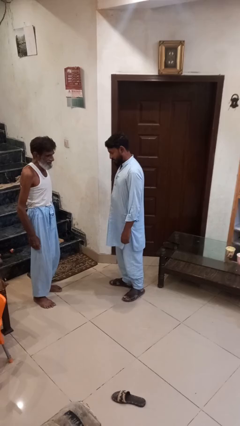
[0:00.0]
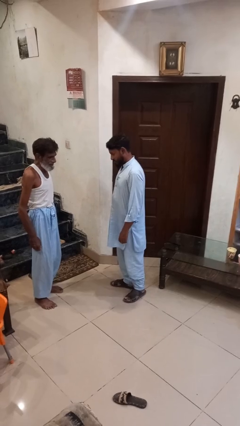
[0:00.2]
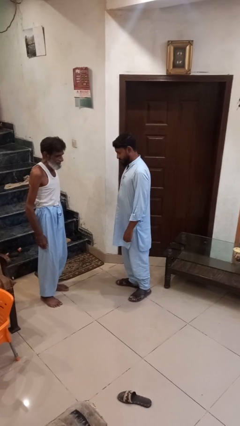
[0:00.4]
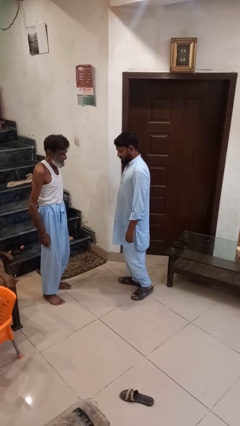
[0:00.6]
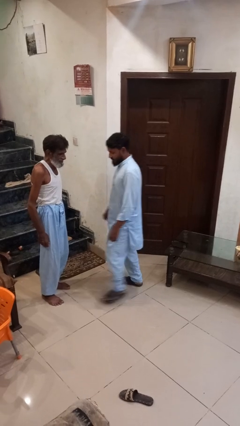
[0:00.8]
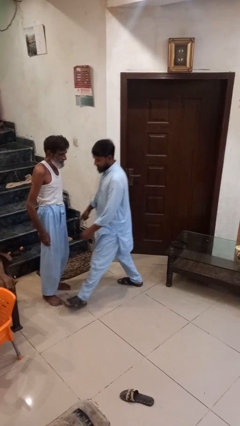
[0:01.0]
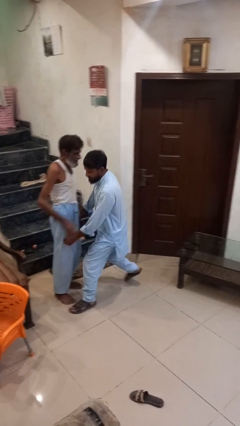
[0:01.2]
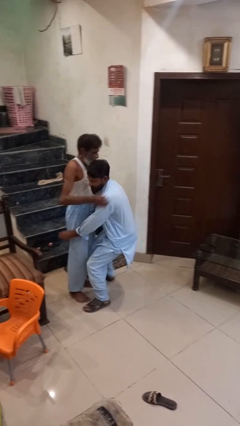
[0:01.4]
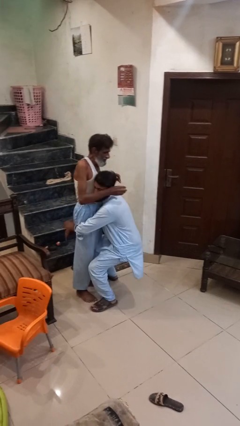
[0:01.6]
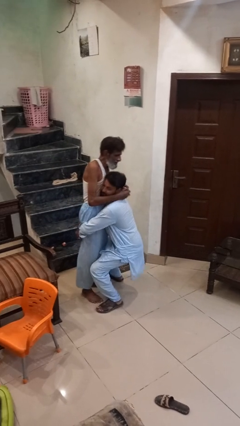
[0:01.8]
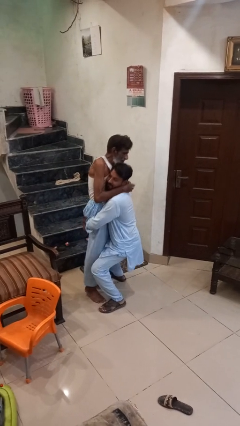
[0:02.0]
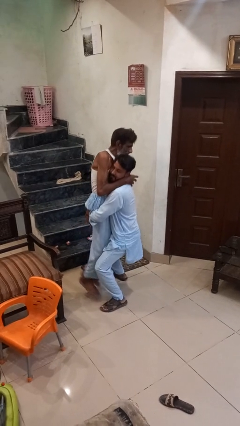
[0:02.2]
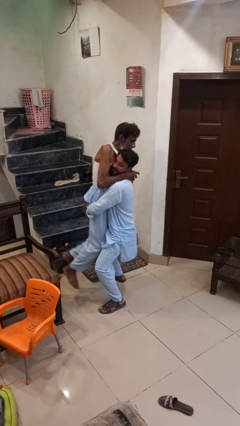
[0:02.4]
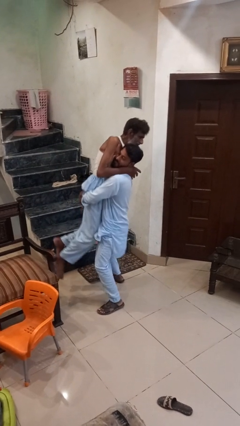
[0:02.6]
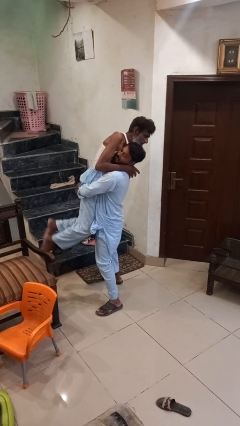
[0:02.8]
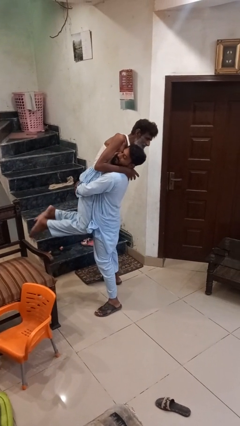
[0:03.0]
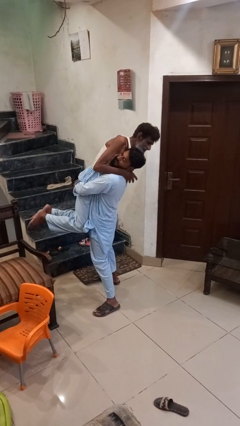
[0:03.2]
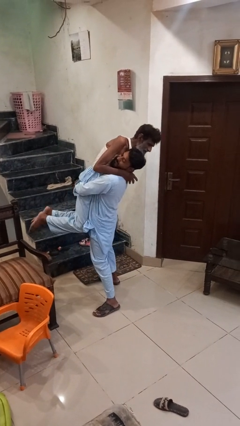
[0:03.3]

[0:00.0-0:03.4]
person picks up person

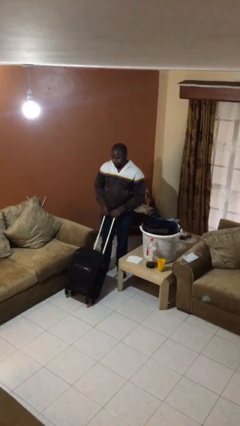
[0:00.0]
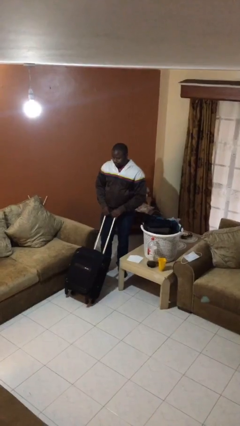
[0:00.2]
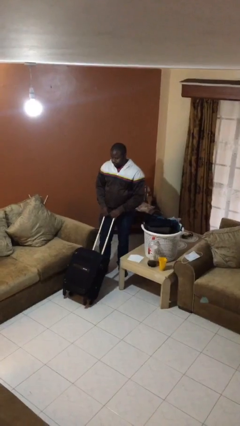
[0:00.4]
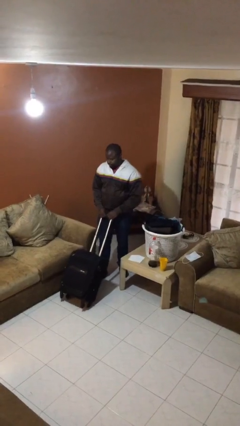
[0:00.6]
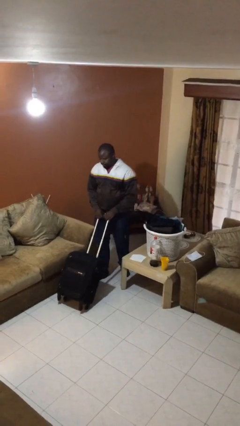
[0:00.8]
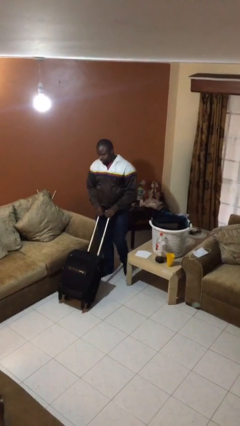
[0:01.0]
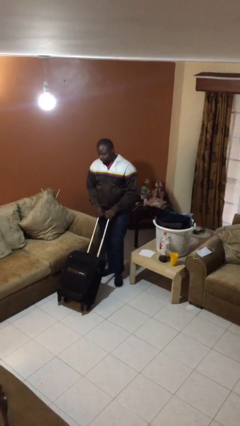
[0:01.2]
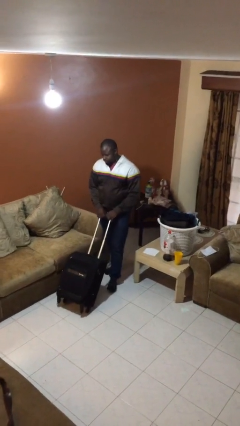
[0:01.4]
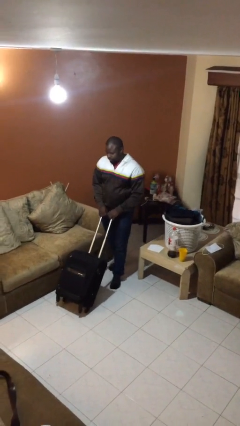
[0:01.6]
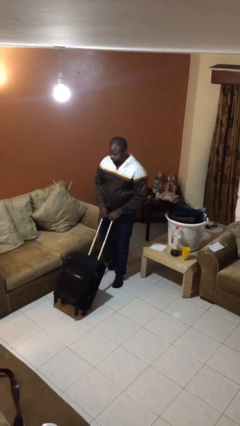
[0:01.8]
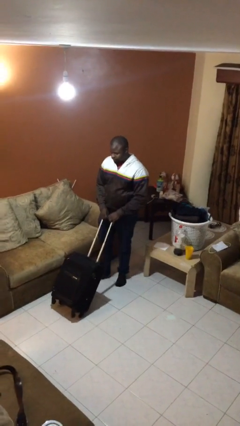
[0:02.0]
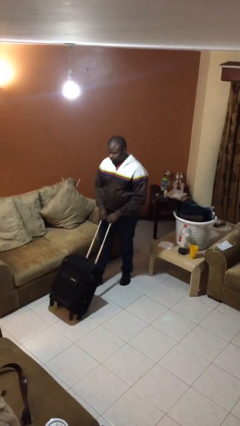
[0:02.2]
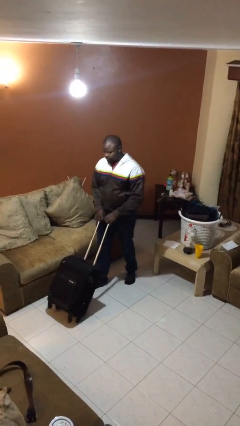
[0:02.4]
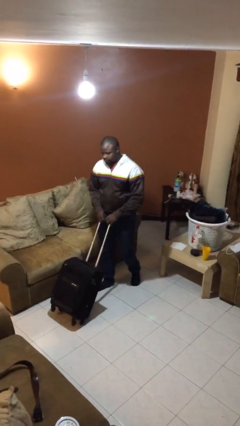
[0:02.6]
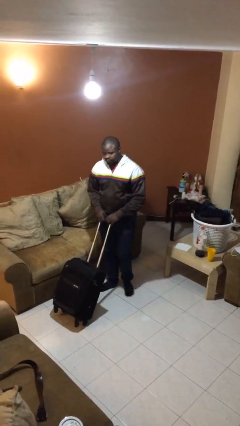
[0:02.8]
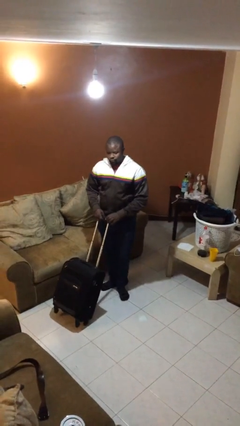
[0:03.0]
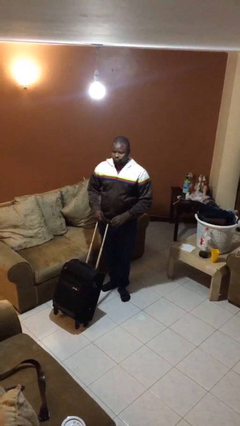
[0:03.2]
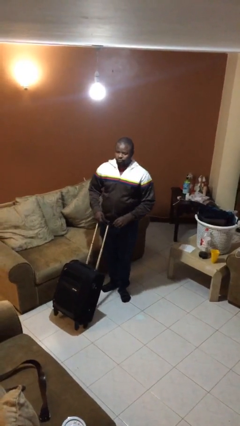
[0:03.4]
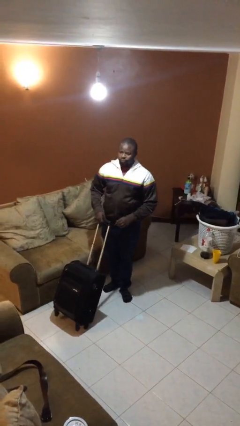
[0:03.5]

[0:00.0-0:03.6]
person pushes wheeled cart

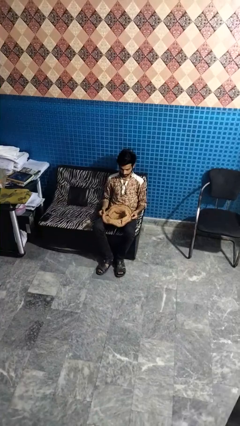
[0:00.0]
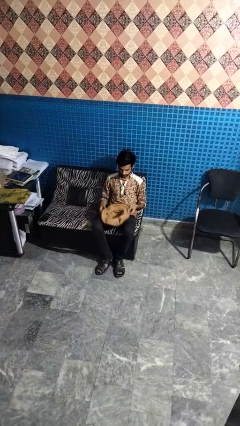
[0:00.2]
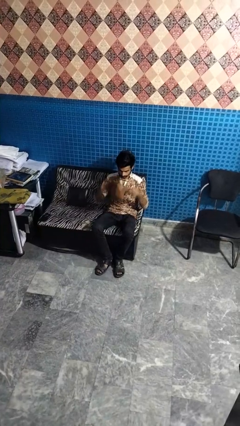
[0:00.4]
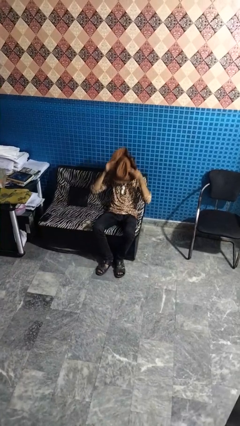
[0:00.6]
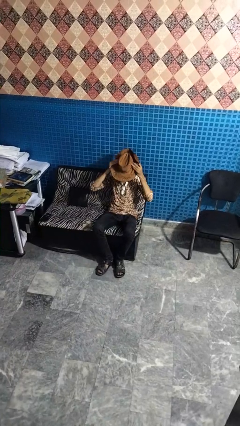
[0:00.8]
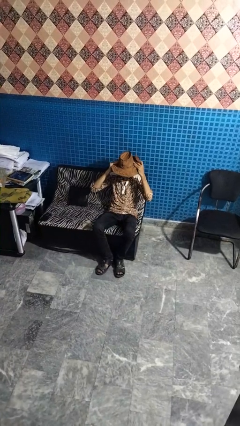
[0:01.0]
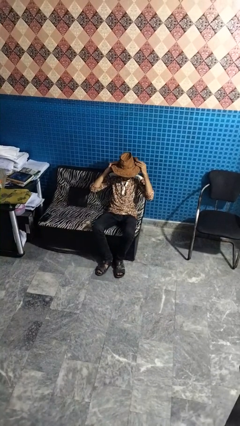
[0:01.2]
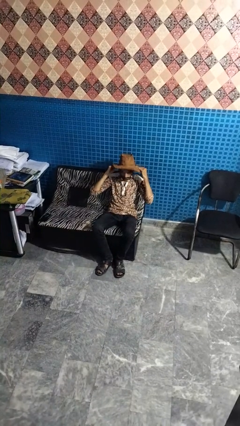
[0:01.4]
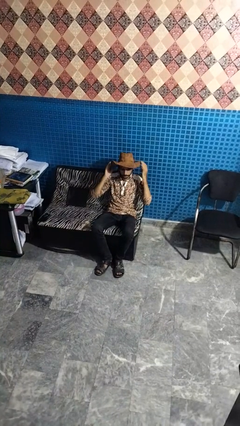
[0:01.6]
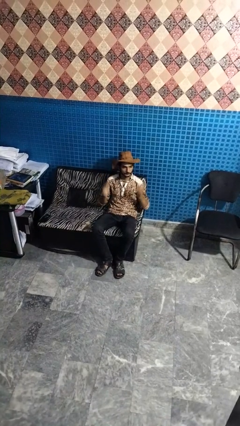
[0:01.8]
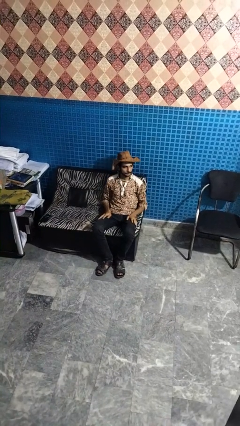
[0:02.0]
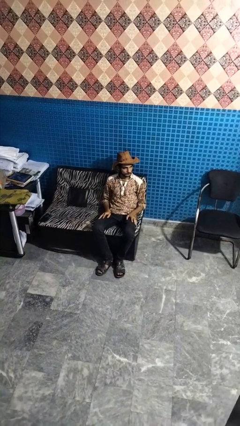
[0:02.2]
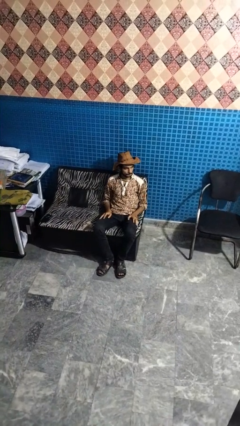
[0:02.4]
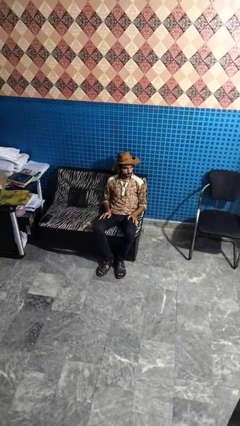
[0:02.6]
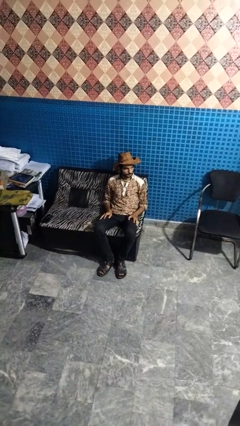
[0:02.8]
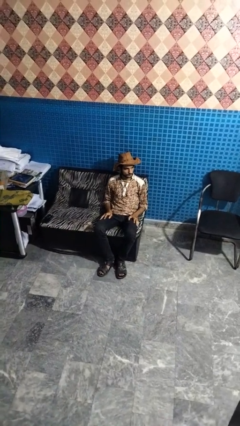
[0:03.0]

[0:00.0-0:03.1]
person puts on hat

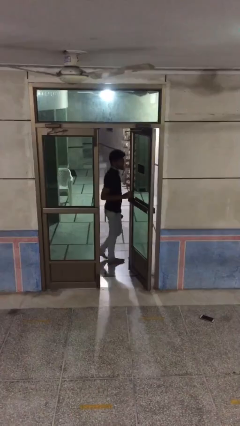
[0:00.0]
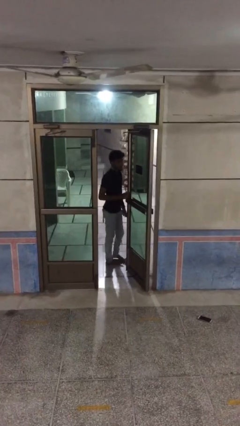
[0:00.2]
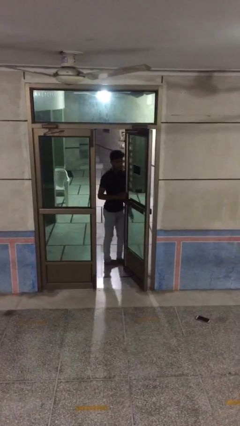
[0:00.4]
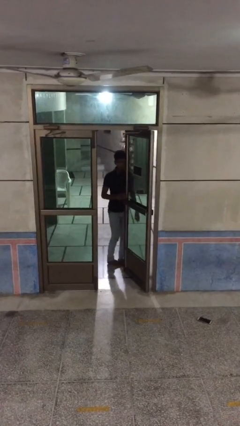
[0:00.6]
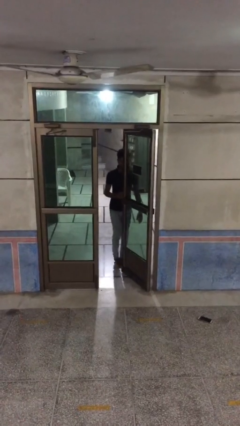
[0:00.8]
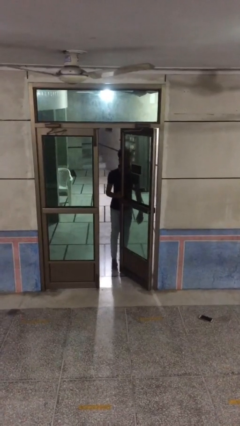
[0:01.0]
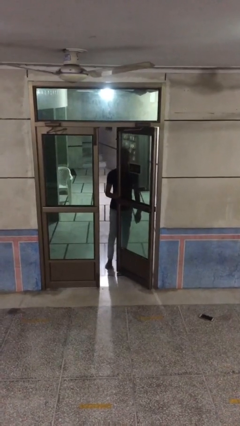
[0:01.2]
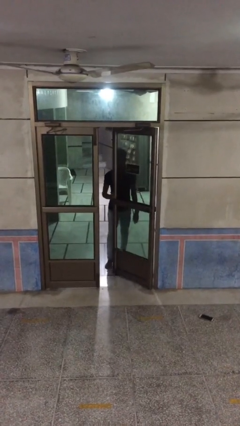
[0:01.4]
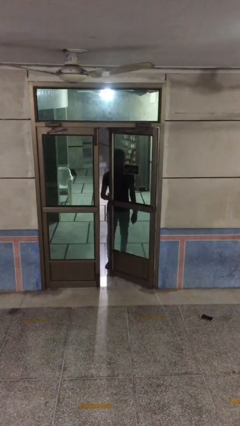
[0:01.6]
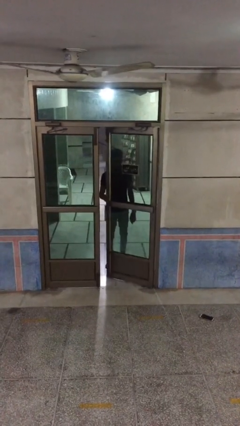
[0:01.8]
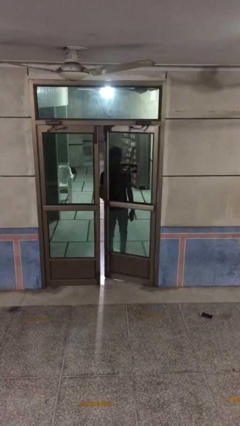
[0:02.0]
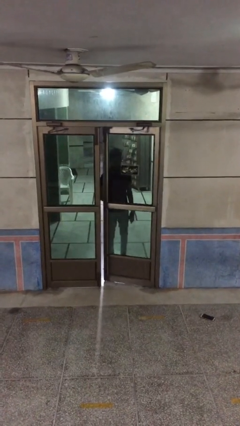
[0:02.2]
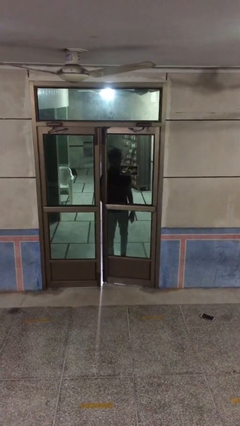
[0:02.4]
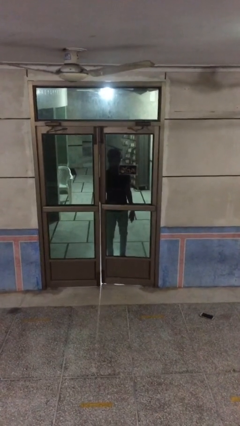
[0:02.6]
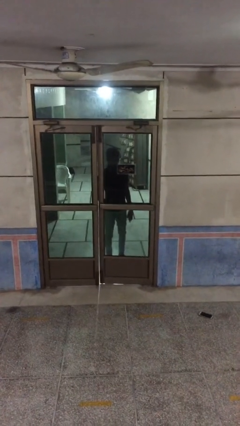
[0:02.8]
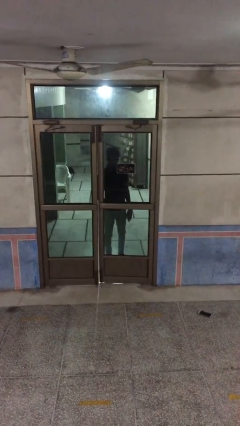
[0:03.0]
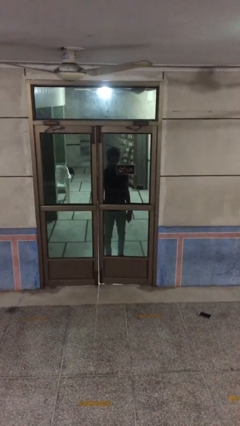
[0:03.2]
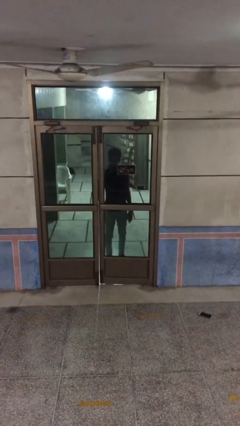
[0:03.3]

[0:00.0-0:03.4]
person closes facility door

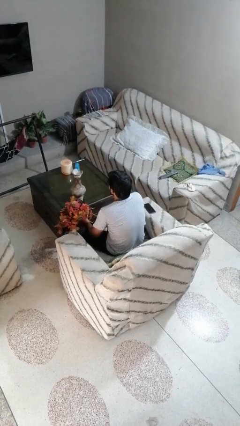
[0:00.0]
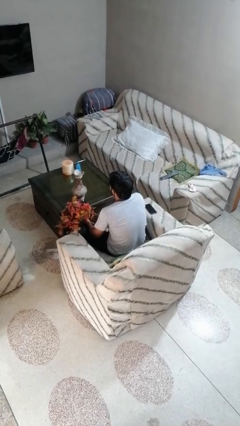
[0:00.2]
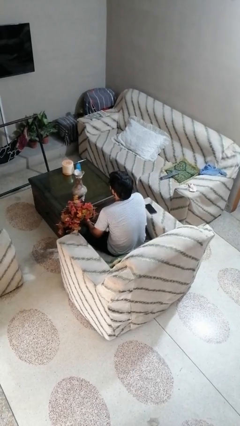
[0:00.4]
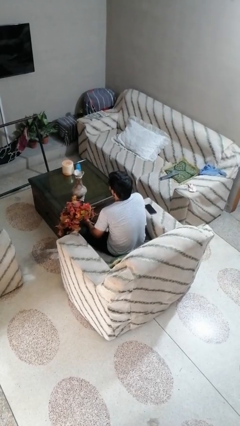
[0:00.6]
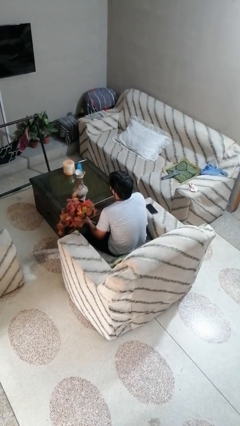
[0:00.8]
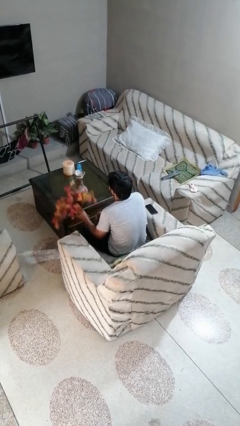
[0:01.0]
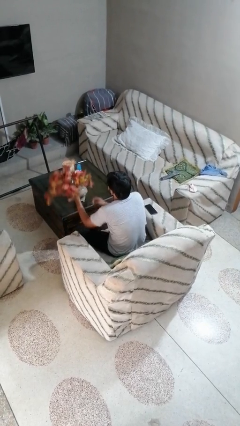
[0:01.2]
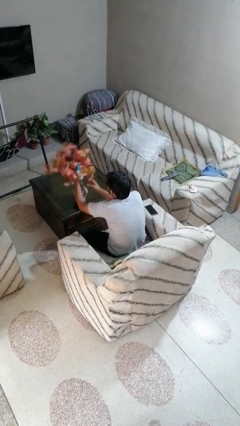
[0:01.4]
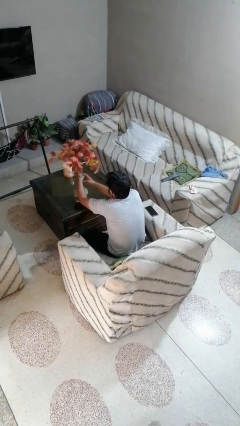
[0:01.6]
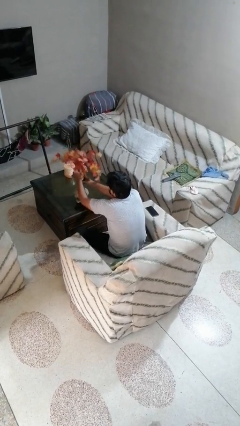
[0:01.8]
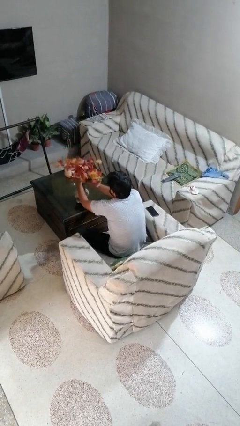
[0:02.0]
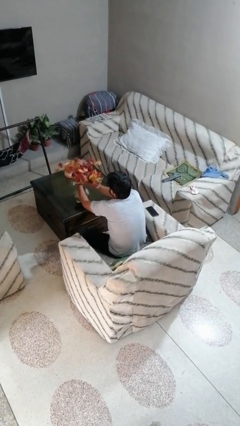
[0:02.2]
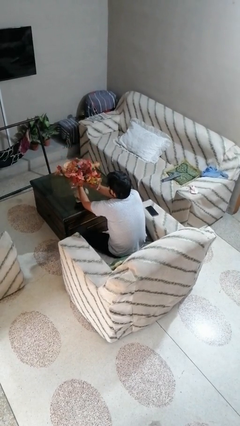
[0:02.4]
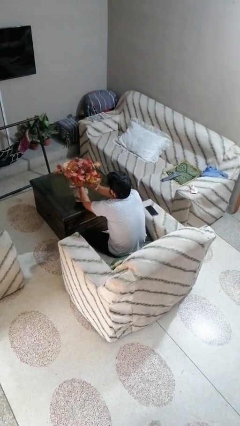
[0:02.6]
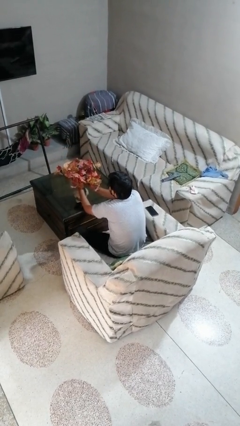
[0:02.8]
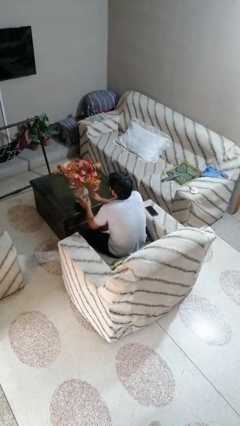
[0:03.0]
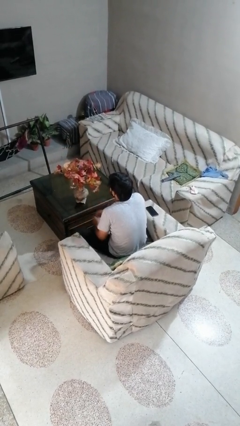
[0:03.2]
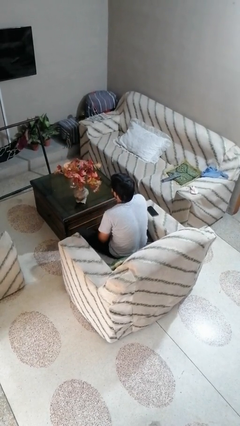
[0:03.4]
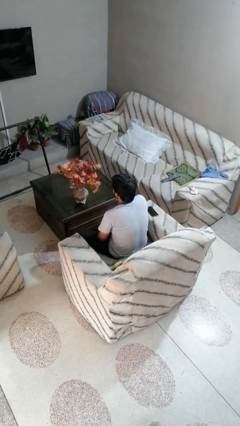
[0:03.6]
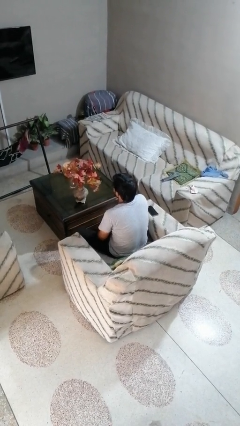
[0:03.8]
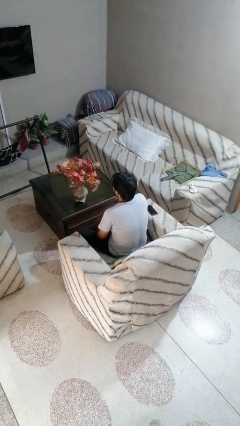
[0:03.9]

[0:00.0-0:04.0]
person arranges flowers in vase

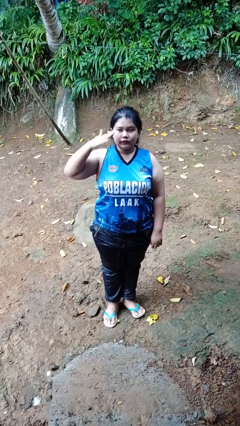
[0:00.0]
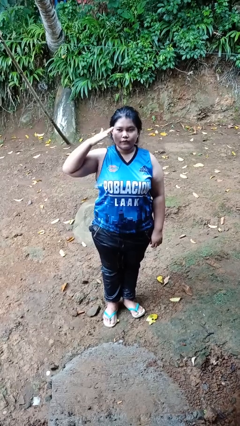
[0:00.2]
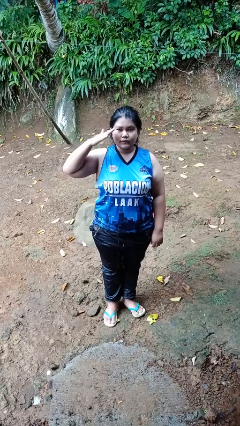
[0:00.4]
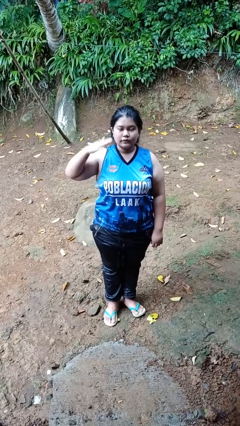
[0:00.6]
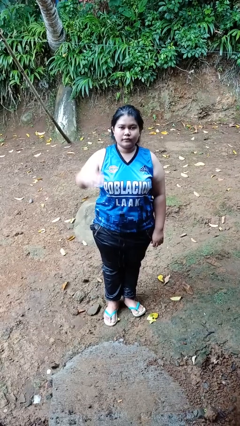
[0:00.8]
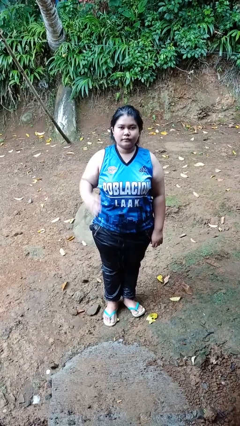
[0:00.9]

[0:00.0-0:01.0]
person salutes
